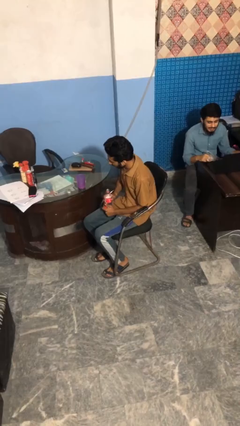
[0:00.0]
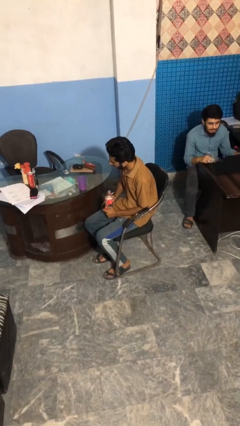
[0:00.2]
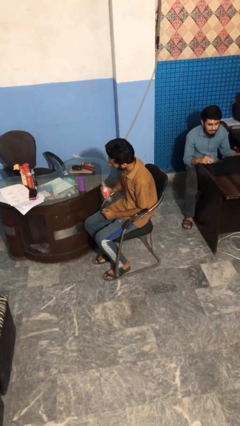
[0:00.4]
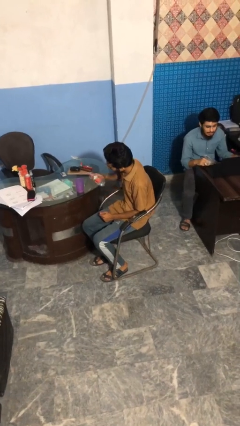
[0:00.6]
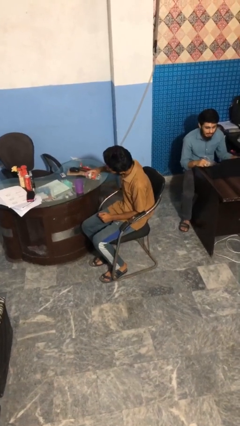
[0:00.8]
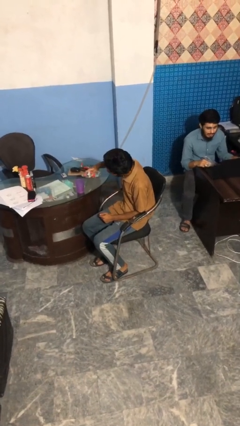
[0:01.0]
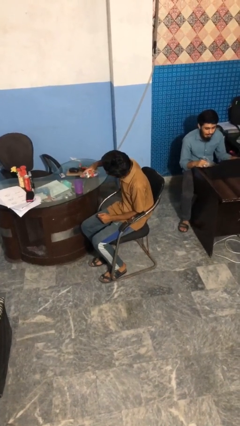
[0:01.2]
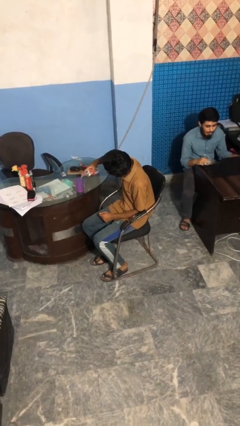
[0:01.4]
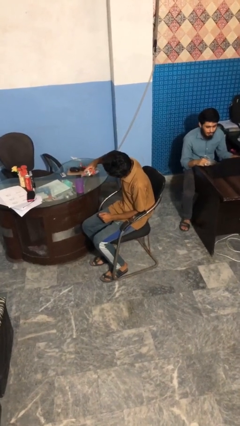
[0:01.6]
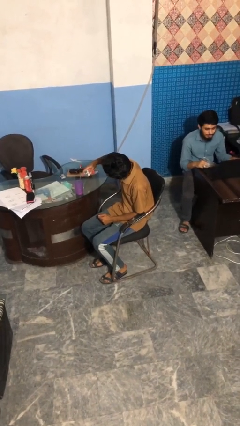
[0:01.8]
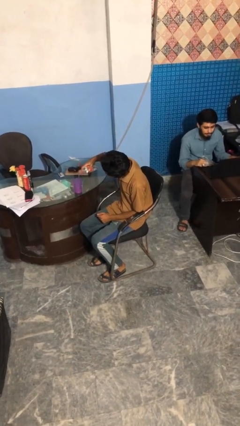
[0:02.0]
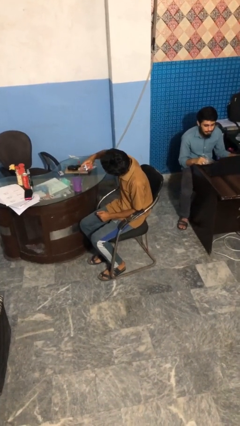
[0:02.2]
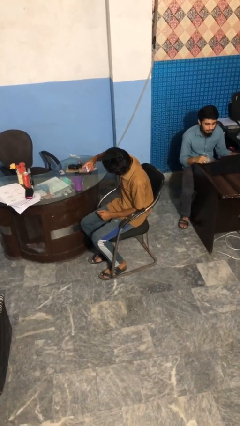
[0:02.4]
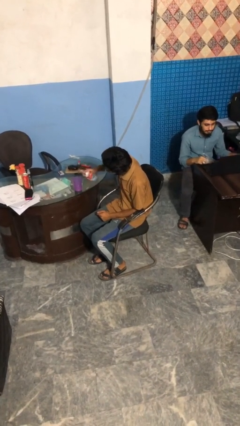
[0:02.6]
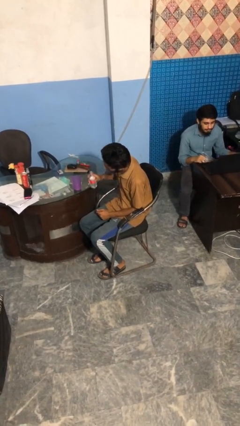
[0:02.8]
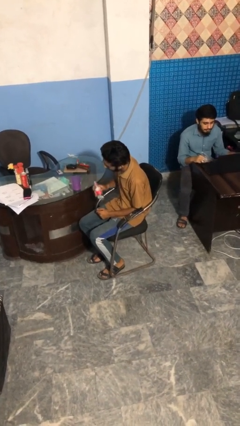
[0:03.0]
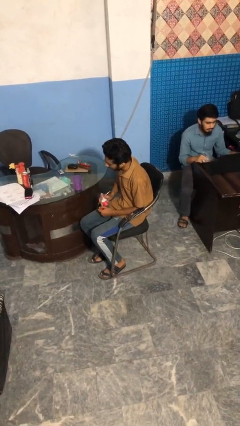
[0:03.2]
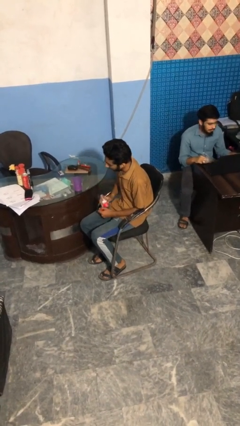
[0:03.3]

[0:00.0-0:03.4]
person pours liquid into cup

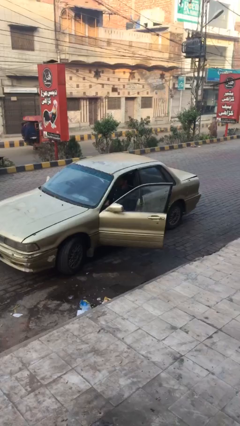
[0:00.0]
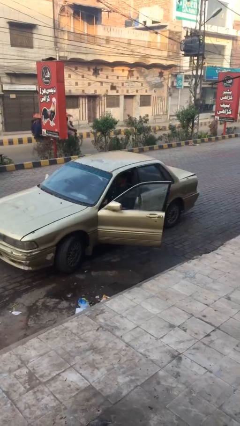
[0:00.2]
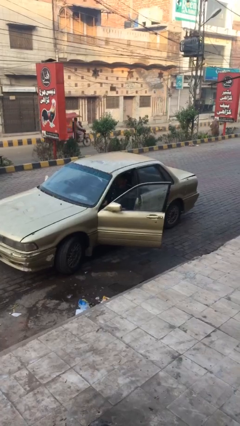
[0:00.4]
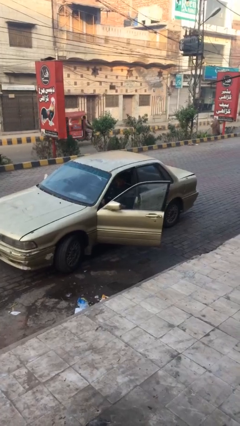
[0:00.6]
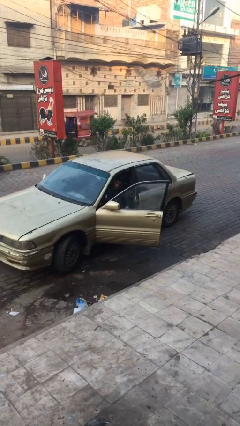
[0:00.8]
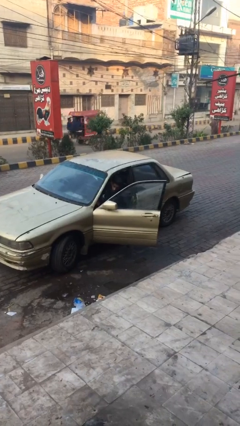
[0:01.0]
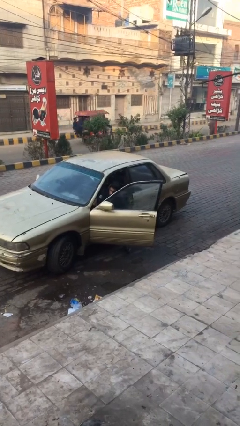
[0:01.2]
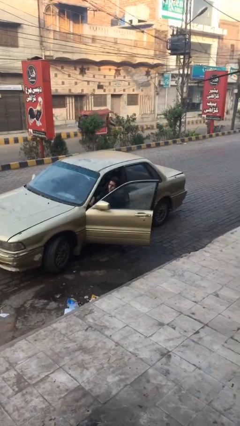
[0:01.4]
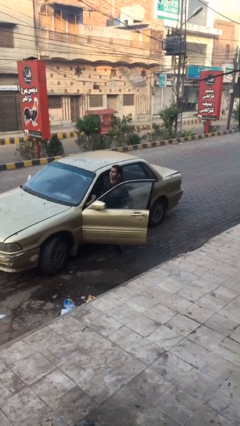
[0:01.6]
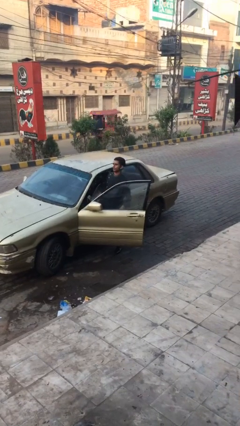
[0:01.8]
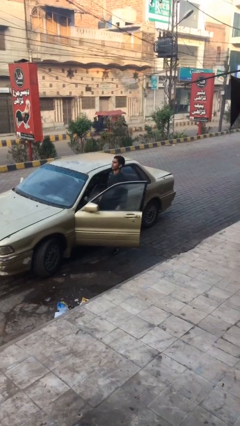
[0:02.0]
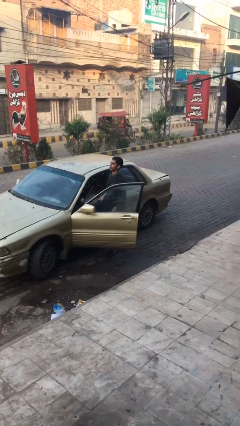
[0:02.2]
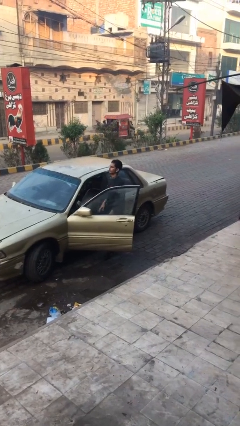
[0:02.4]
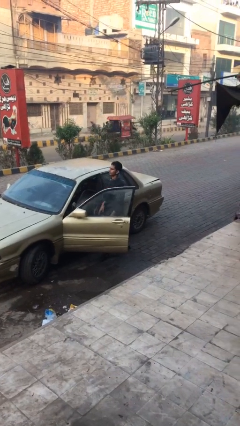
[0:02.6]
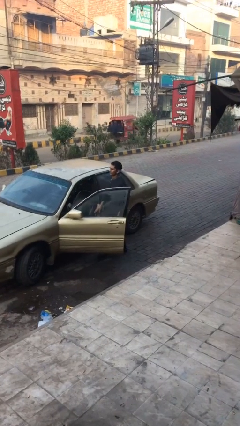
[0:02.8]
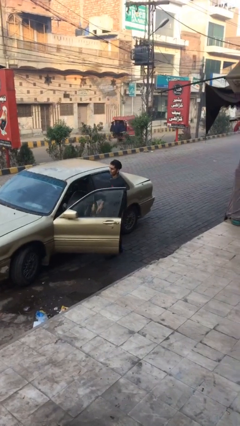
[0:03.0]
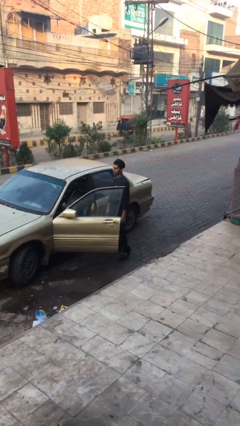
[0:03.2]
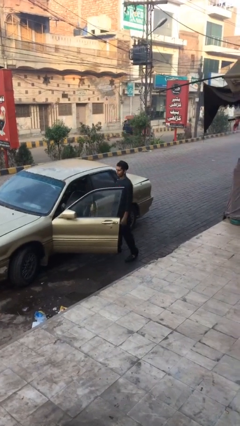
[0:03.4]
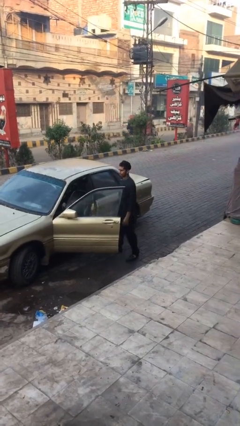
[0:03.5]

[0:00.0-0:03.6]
person exits car

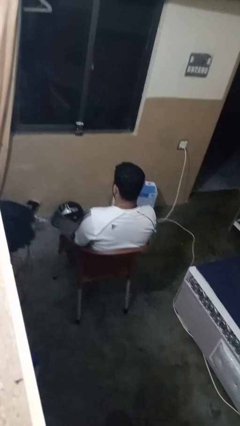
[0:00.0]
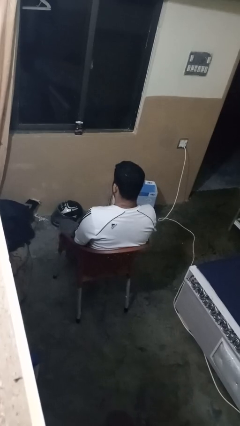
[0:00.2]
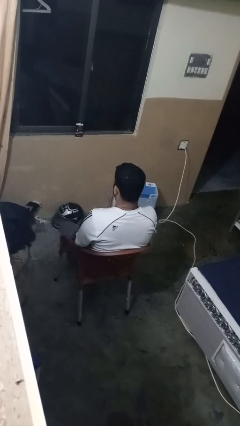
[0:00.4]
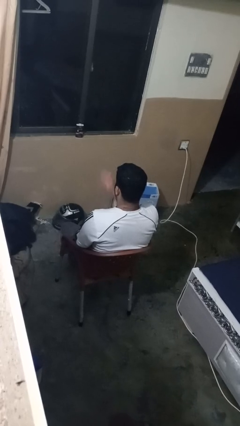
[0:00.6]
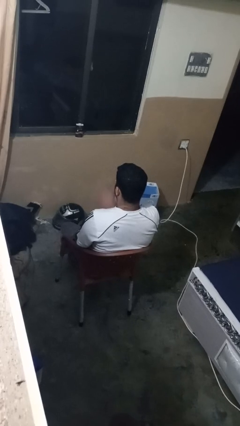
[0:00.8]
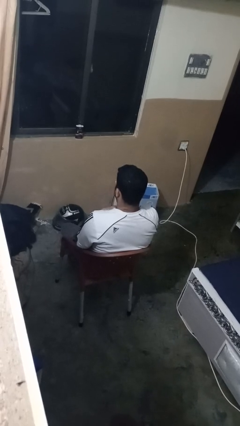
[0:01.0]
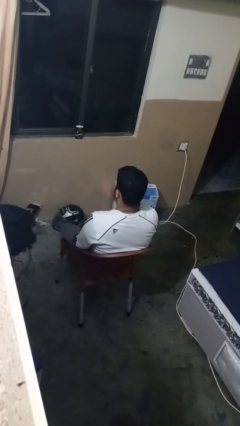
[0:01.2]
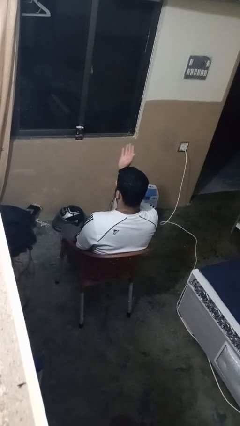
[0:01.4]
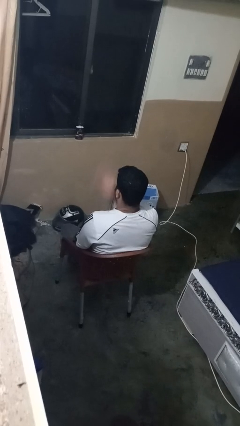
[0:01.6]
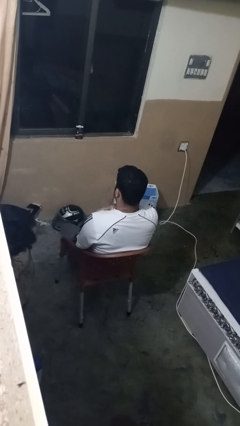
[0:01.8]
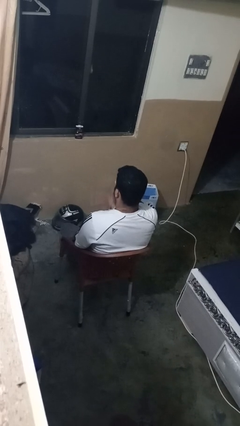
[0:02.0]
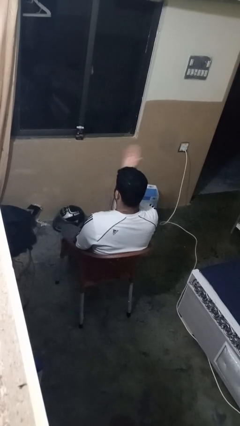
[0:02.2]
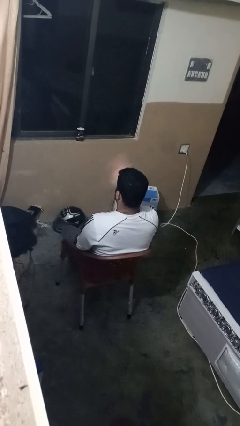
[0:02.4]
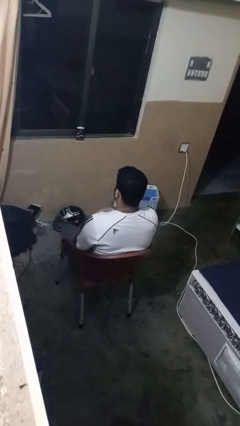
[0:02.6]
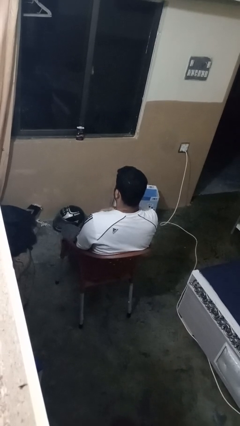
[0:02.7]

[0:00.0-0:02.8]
person drums on chest

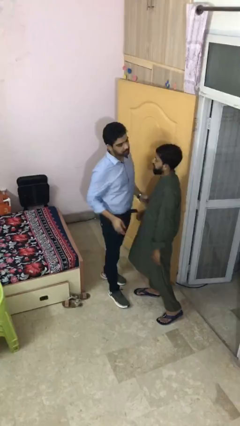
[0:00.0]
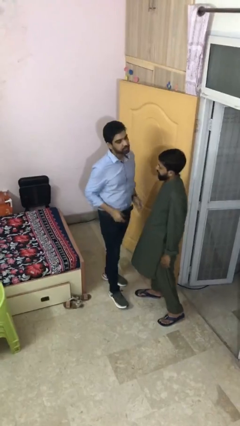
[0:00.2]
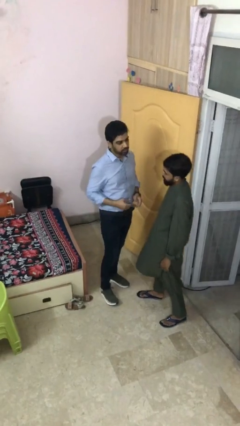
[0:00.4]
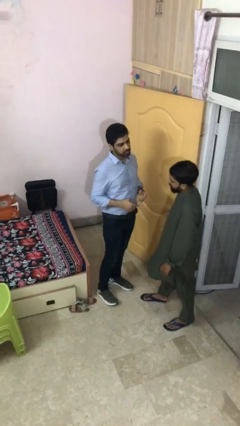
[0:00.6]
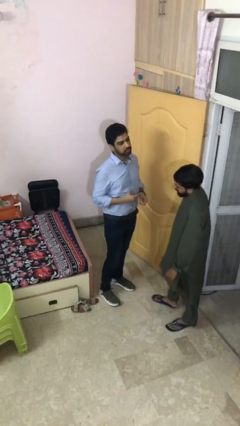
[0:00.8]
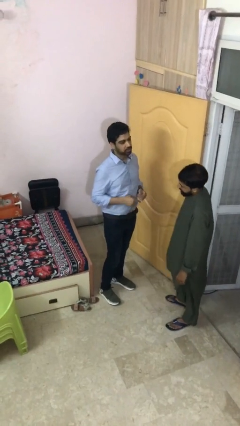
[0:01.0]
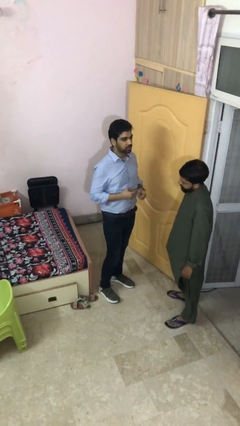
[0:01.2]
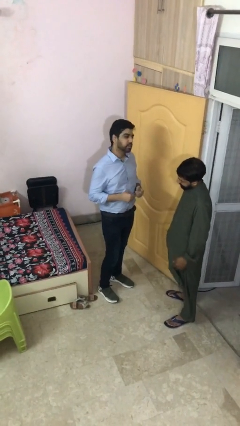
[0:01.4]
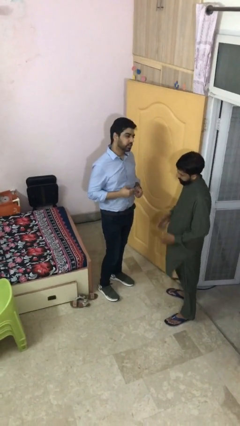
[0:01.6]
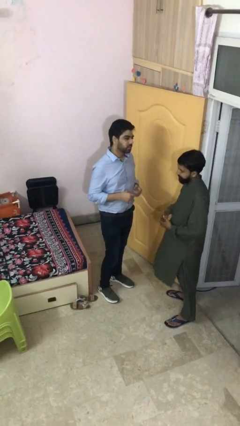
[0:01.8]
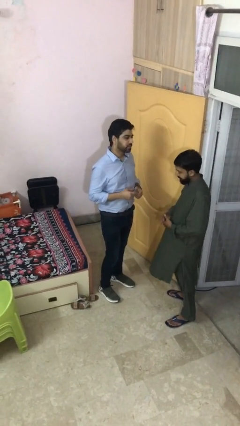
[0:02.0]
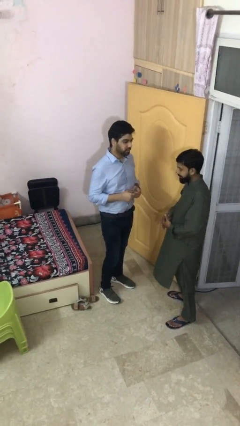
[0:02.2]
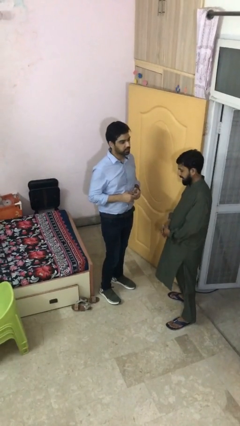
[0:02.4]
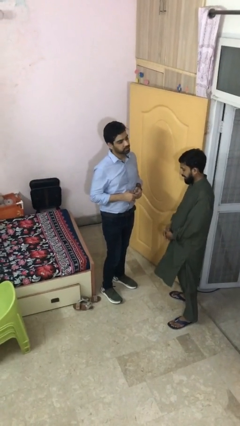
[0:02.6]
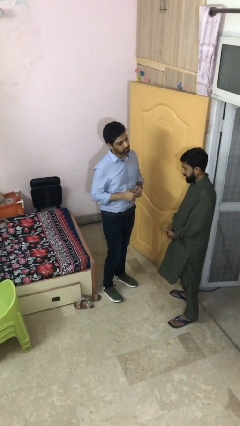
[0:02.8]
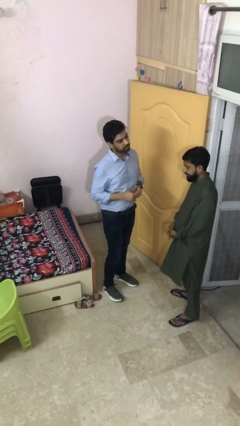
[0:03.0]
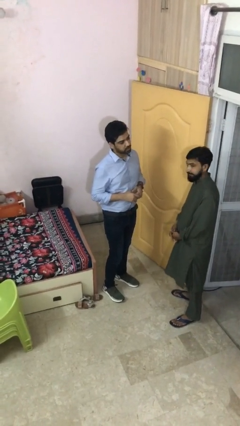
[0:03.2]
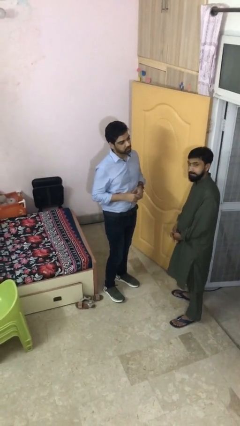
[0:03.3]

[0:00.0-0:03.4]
person talks to person

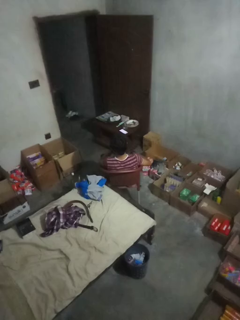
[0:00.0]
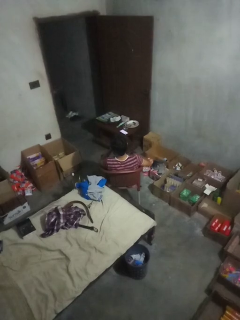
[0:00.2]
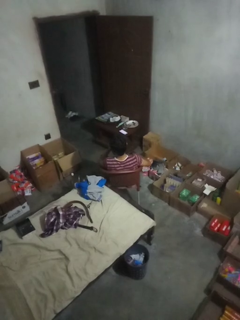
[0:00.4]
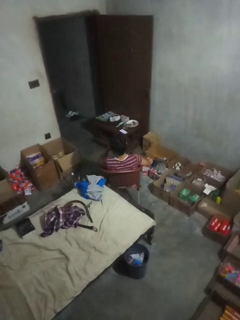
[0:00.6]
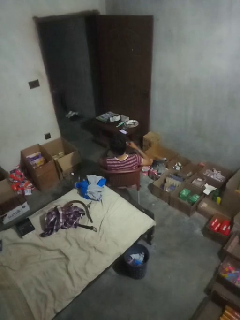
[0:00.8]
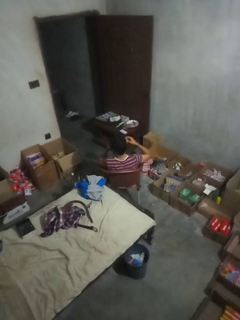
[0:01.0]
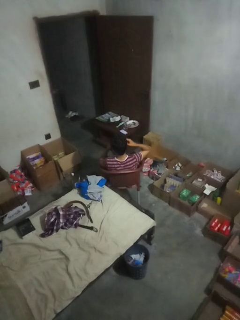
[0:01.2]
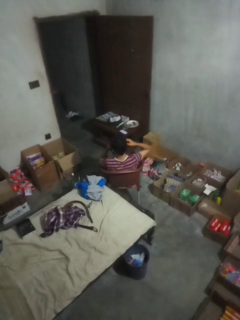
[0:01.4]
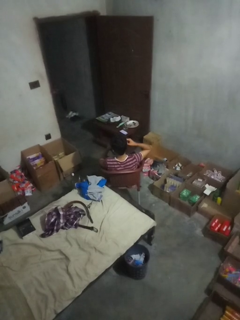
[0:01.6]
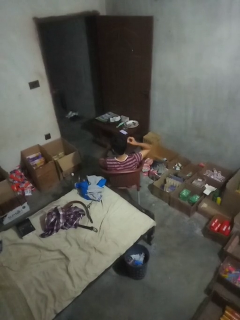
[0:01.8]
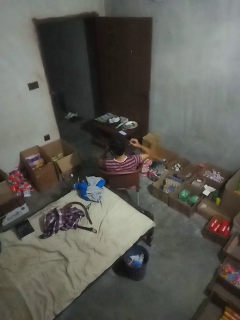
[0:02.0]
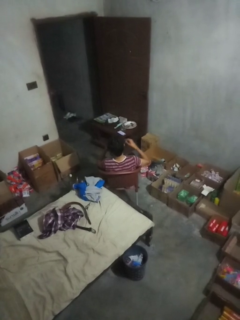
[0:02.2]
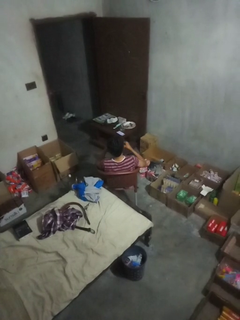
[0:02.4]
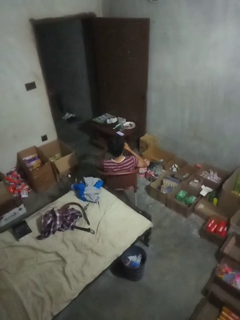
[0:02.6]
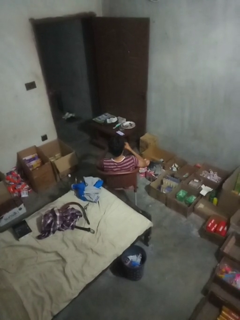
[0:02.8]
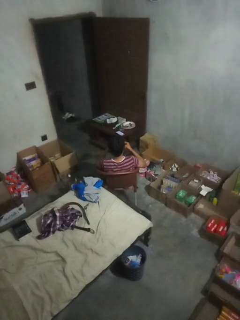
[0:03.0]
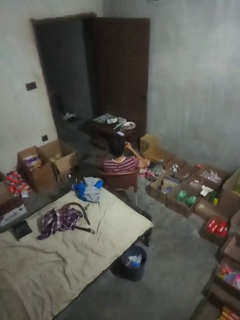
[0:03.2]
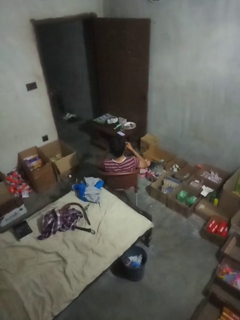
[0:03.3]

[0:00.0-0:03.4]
person takes off earrings

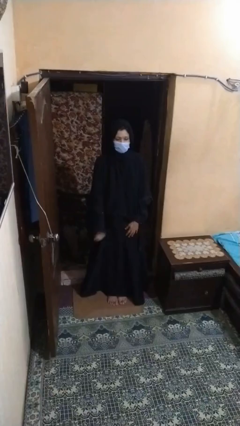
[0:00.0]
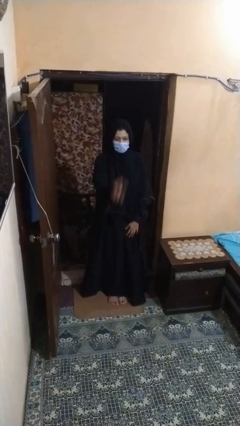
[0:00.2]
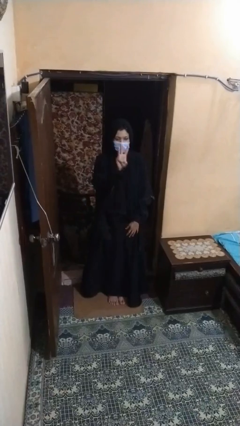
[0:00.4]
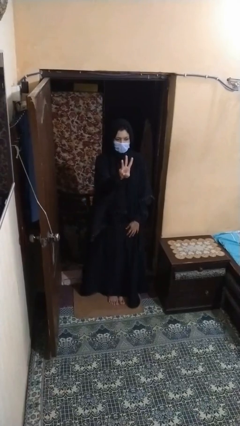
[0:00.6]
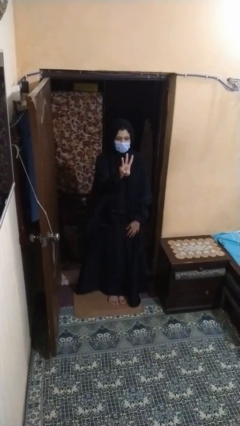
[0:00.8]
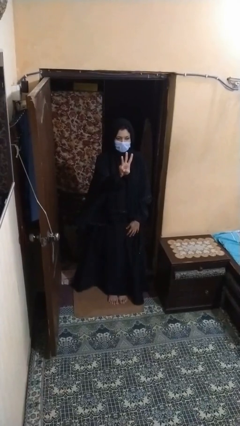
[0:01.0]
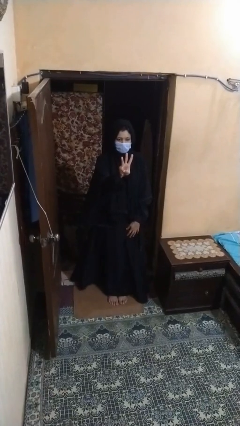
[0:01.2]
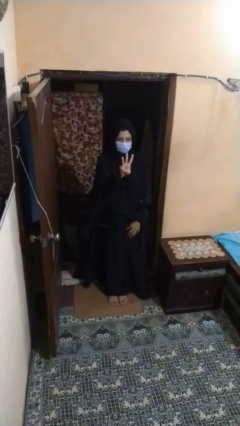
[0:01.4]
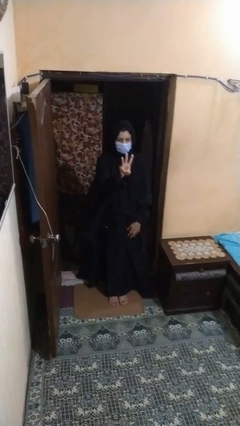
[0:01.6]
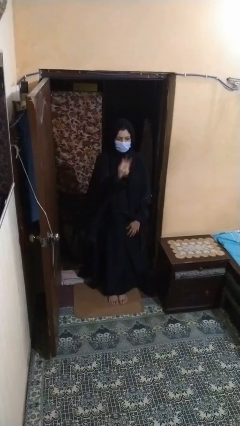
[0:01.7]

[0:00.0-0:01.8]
person gestures number three
